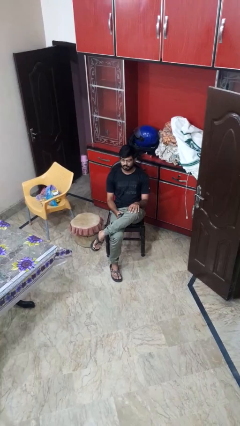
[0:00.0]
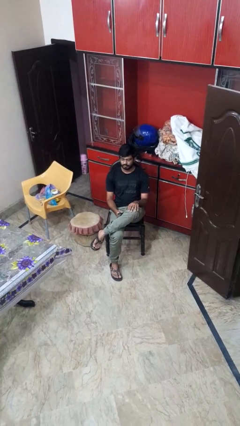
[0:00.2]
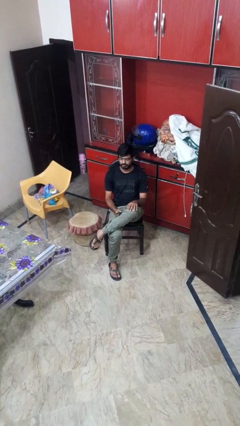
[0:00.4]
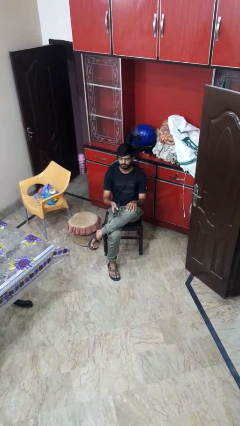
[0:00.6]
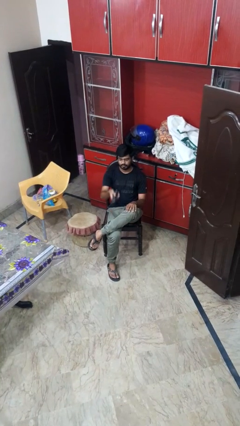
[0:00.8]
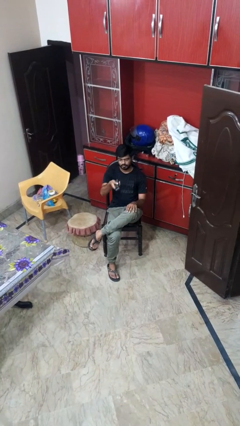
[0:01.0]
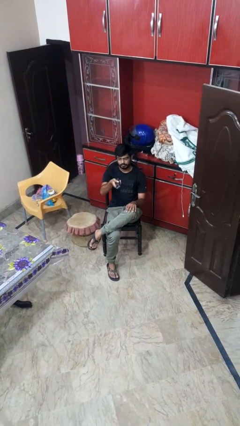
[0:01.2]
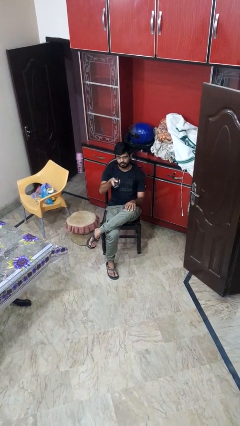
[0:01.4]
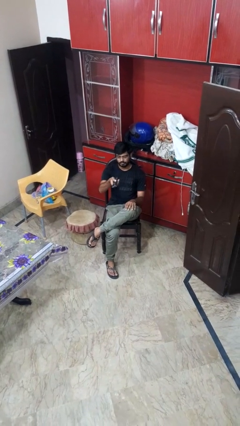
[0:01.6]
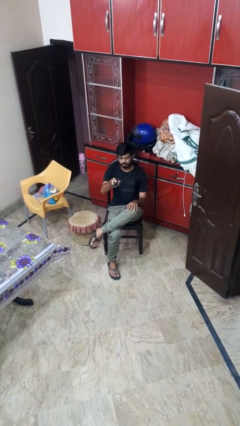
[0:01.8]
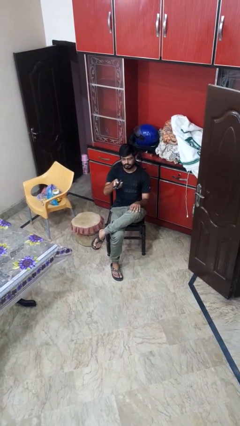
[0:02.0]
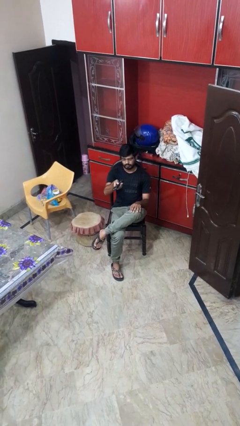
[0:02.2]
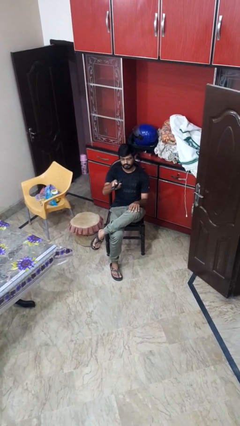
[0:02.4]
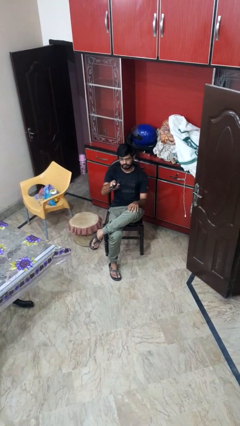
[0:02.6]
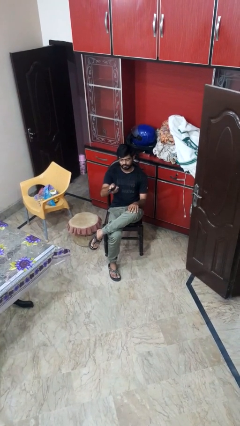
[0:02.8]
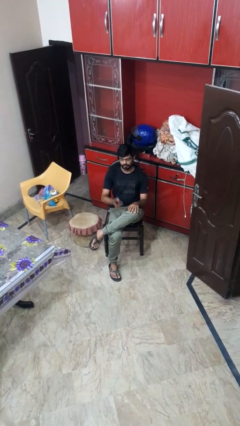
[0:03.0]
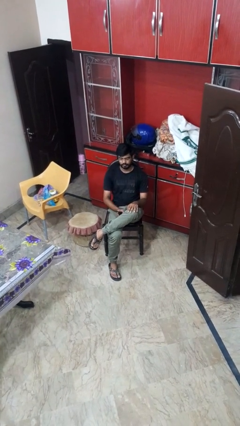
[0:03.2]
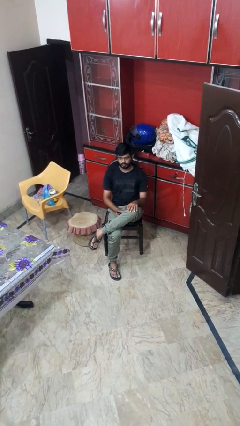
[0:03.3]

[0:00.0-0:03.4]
person uses television remote

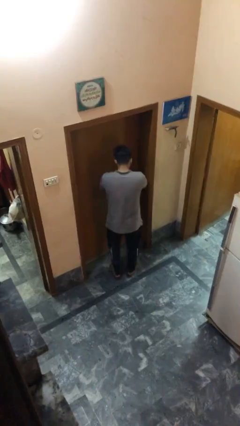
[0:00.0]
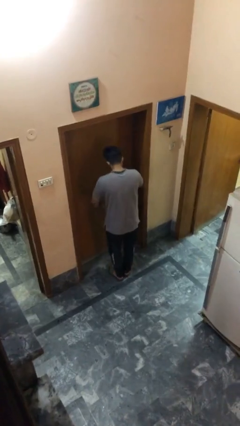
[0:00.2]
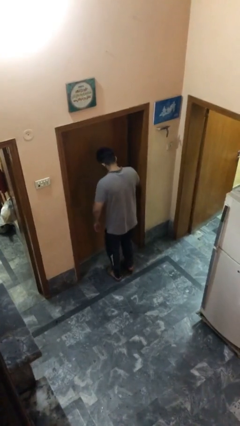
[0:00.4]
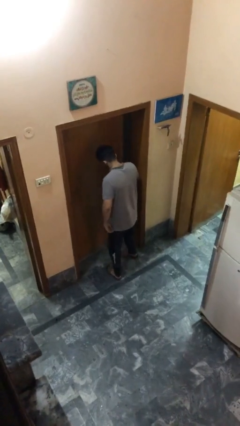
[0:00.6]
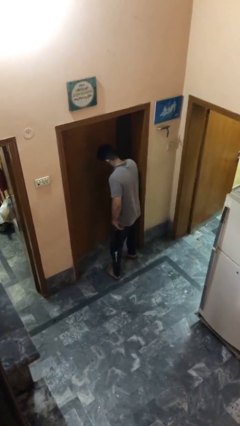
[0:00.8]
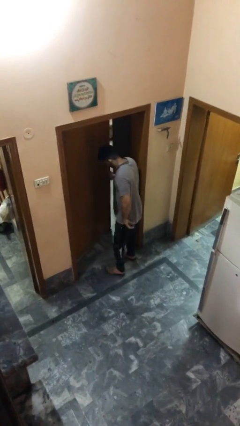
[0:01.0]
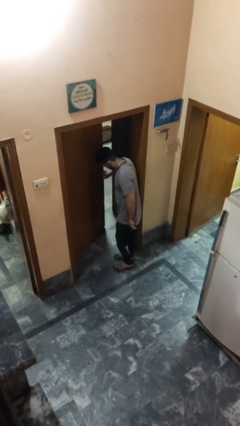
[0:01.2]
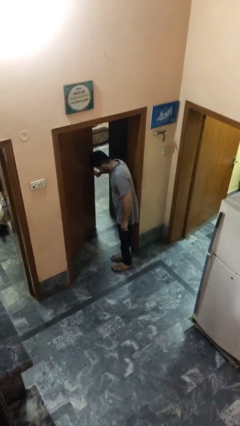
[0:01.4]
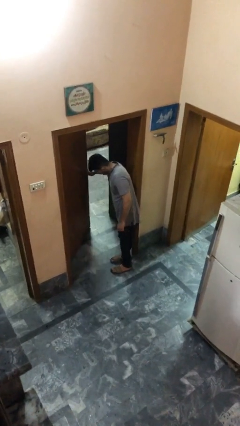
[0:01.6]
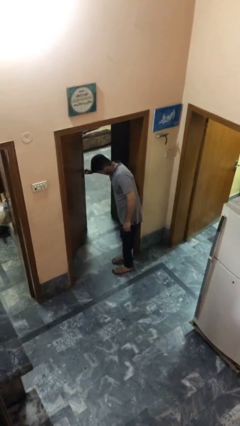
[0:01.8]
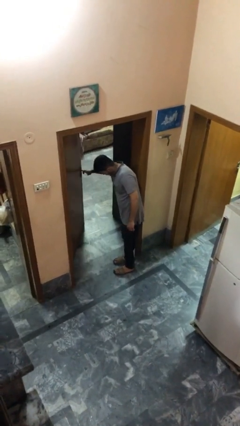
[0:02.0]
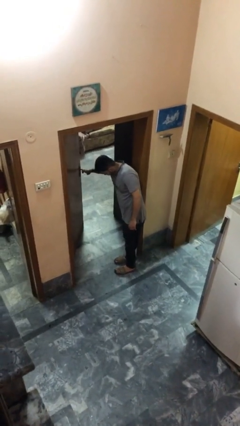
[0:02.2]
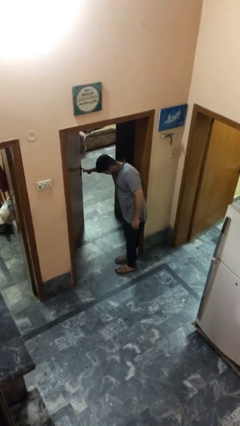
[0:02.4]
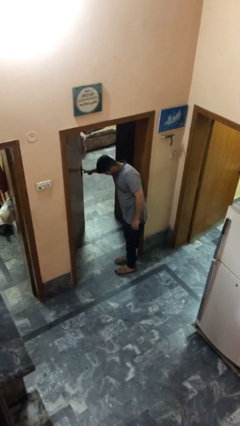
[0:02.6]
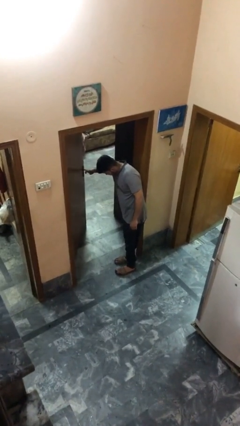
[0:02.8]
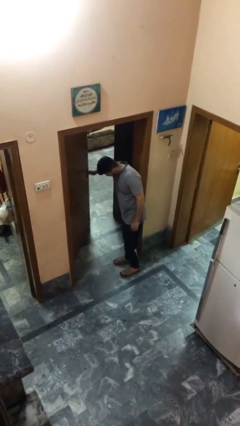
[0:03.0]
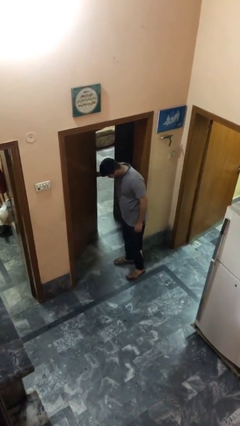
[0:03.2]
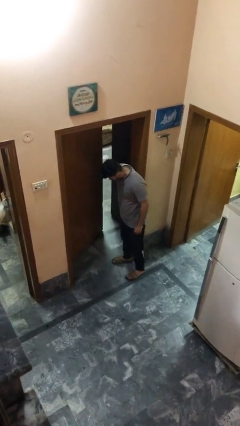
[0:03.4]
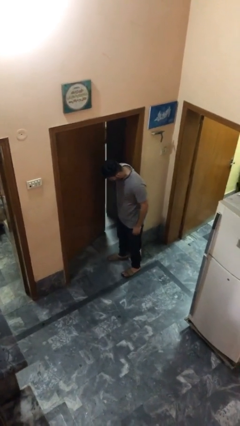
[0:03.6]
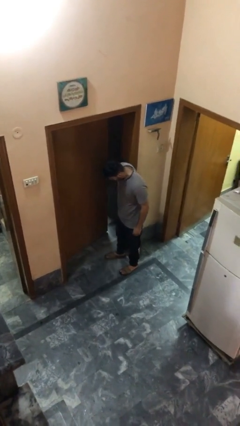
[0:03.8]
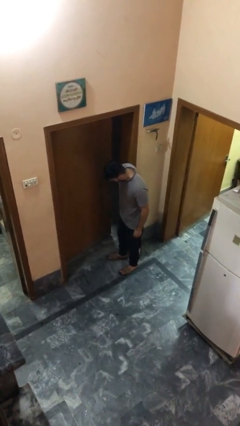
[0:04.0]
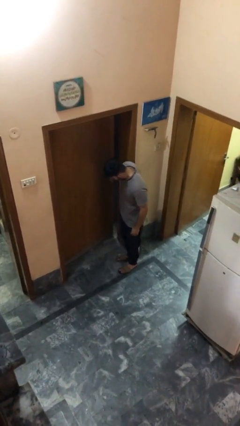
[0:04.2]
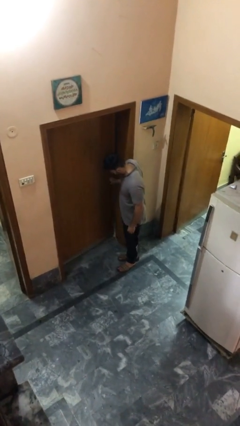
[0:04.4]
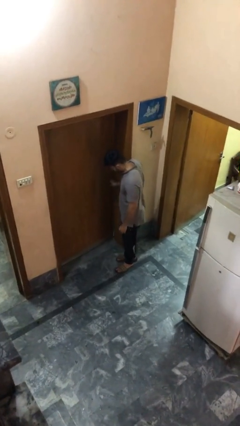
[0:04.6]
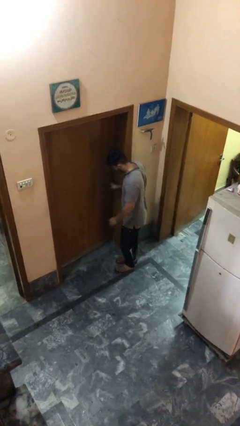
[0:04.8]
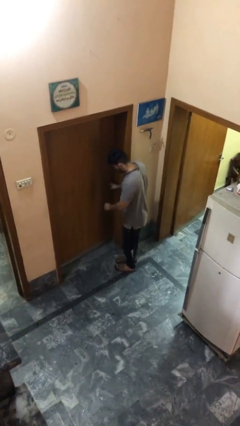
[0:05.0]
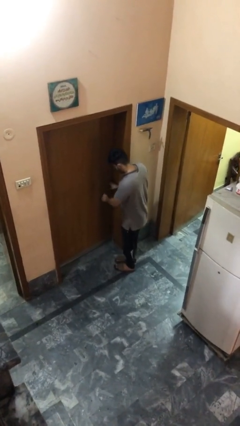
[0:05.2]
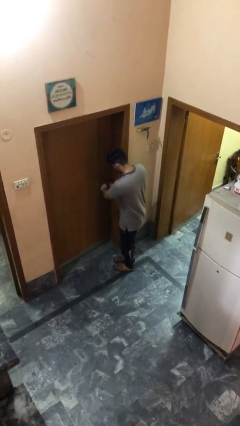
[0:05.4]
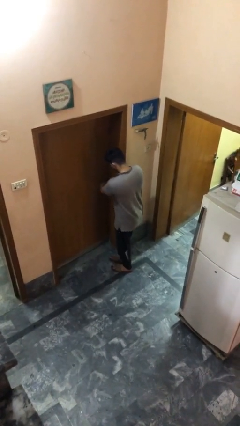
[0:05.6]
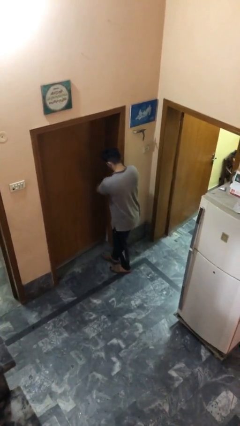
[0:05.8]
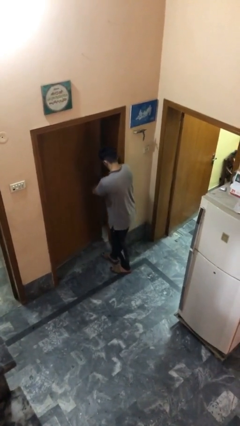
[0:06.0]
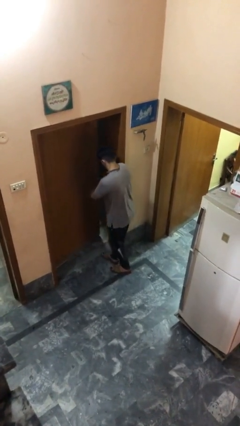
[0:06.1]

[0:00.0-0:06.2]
person opens facility door

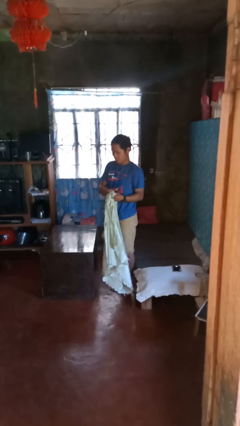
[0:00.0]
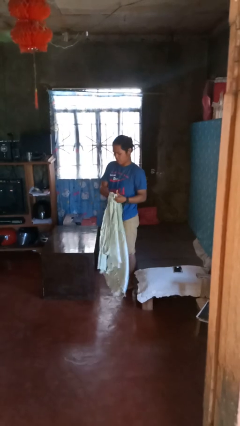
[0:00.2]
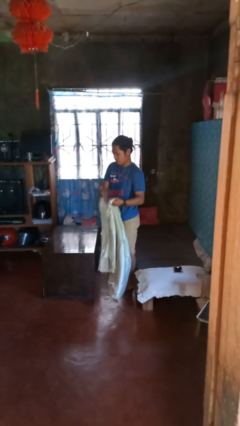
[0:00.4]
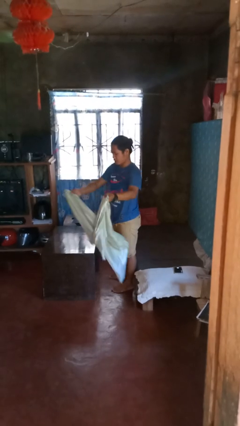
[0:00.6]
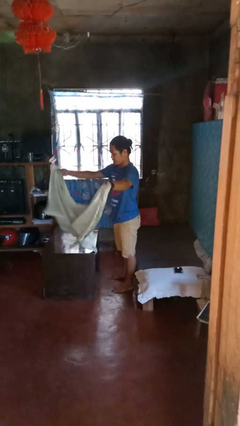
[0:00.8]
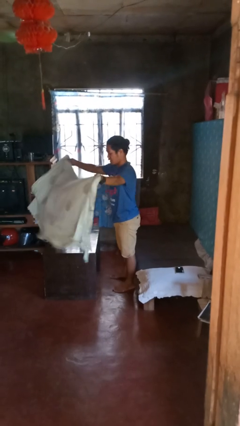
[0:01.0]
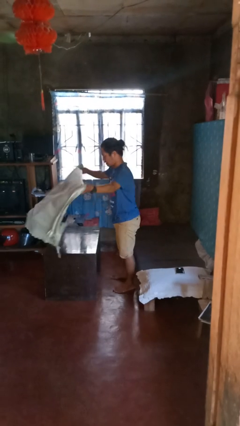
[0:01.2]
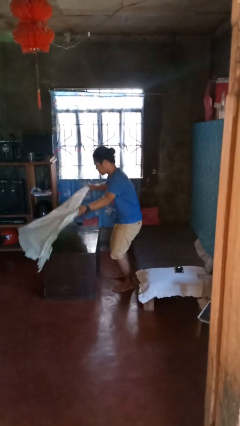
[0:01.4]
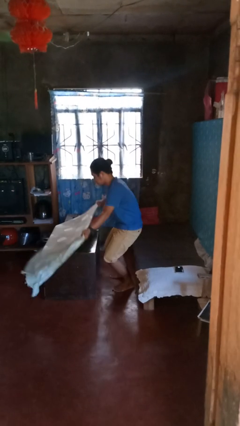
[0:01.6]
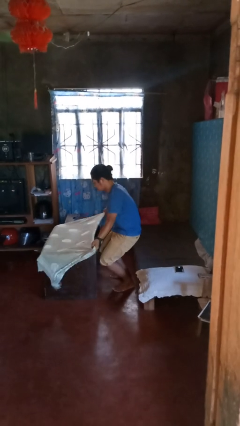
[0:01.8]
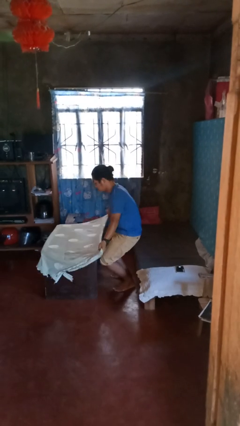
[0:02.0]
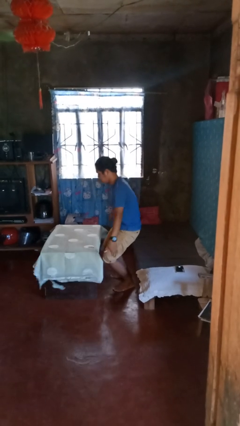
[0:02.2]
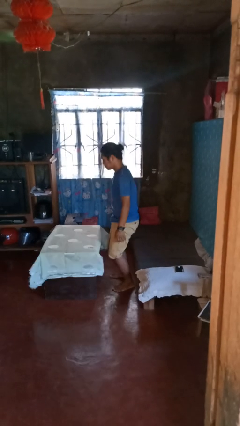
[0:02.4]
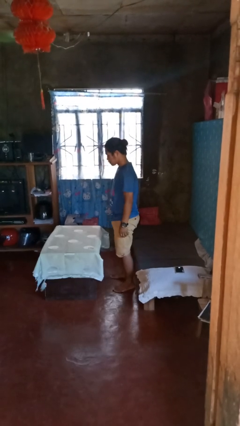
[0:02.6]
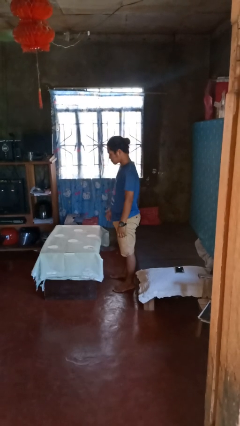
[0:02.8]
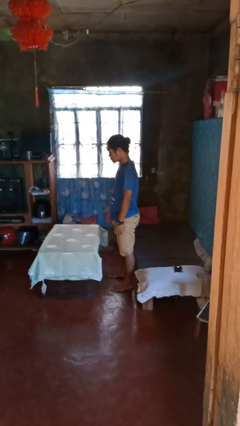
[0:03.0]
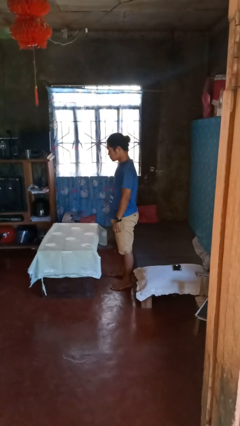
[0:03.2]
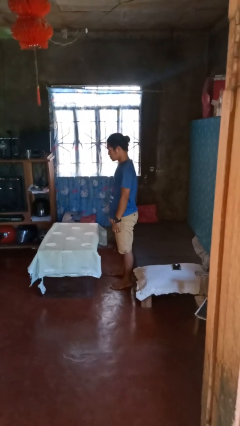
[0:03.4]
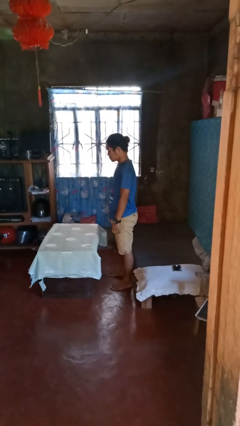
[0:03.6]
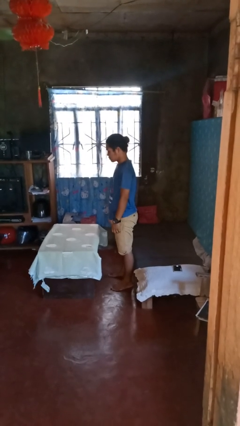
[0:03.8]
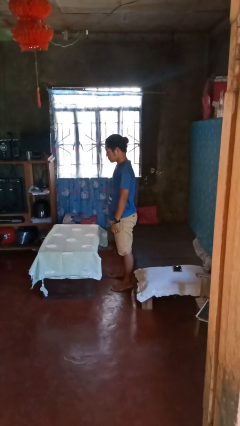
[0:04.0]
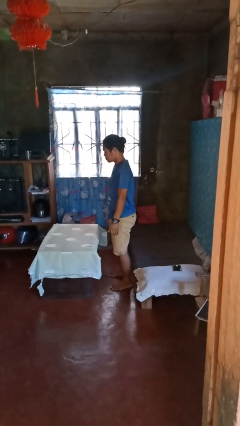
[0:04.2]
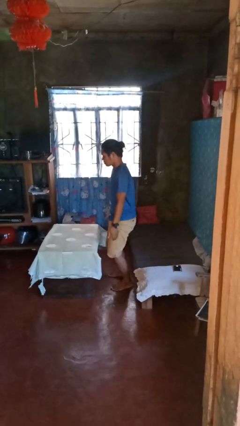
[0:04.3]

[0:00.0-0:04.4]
person spreads tablecloth

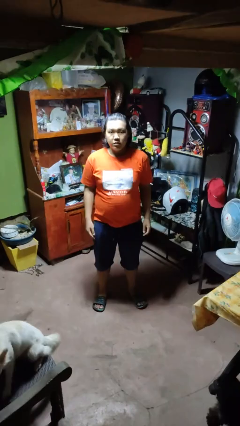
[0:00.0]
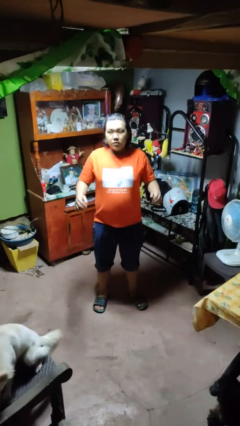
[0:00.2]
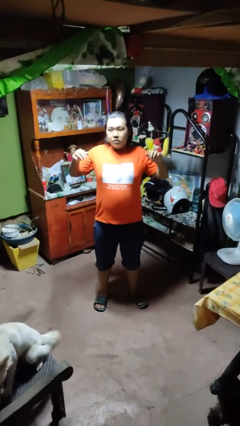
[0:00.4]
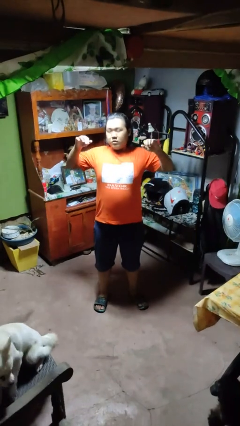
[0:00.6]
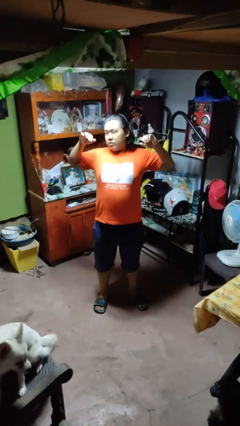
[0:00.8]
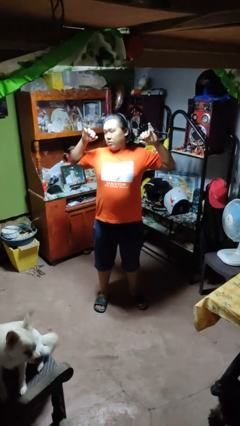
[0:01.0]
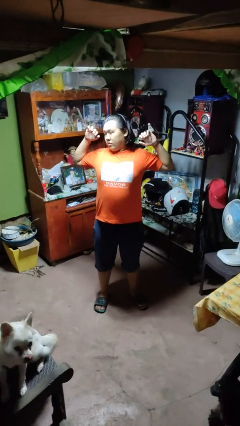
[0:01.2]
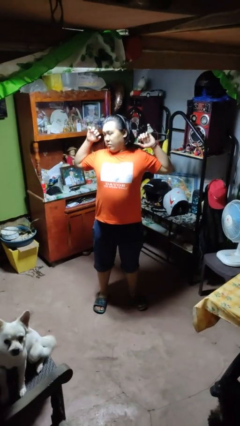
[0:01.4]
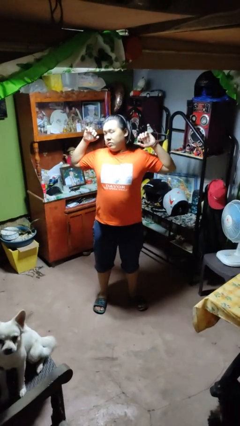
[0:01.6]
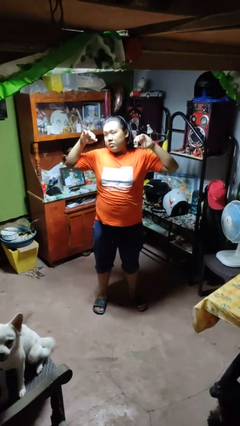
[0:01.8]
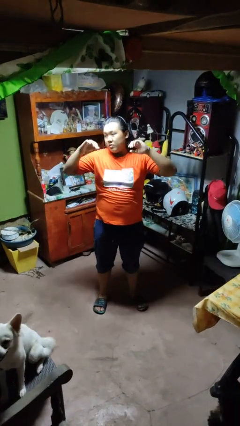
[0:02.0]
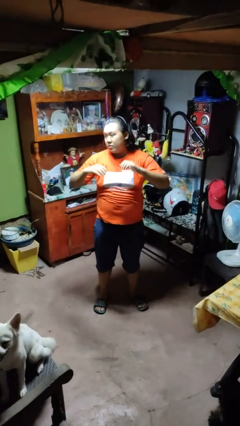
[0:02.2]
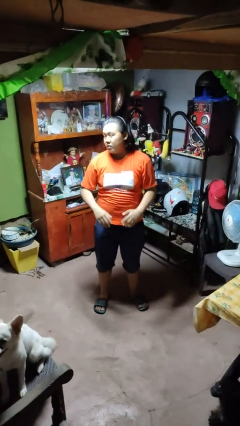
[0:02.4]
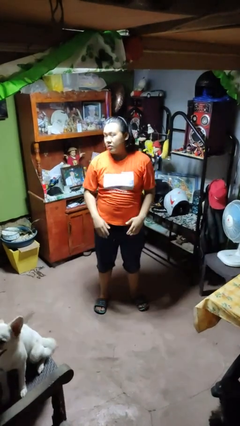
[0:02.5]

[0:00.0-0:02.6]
person stretches arms to side

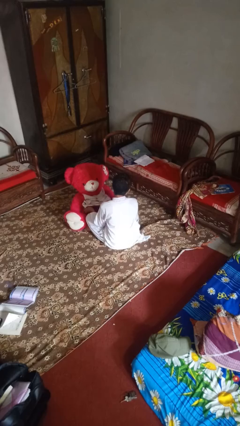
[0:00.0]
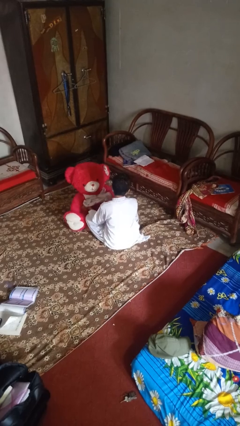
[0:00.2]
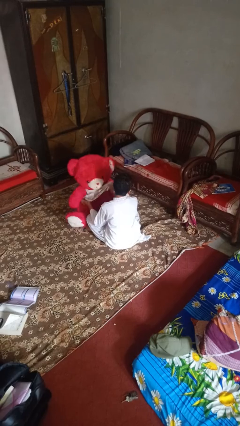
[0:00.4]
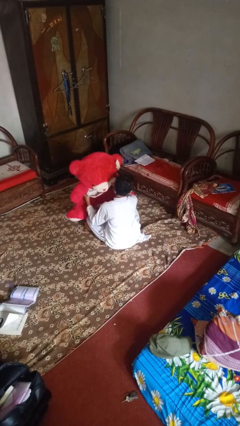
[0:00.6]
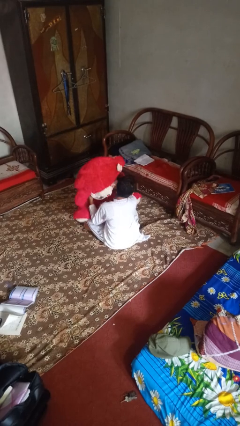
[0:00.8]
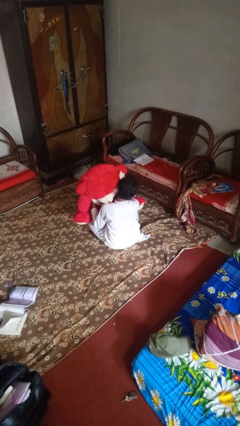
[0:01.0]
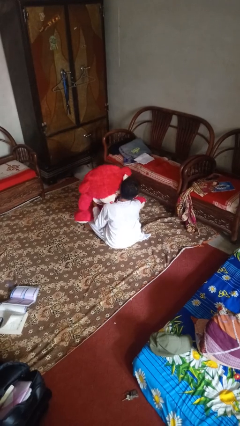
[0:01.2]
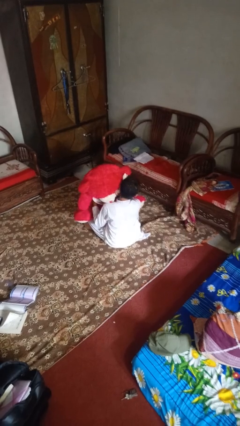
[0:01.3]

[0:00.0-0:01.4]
person hugs stuffed animal
